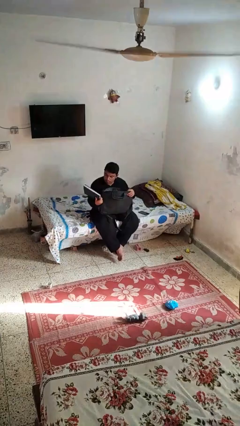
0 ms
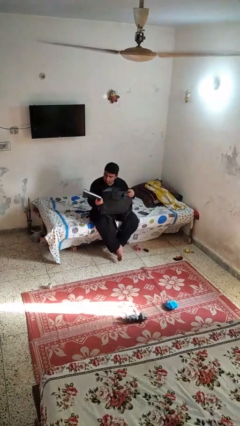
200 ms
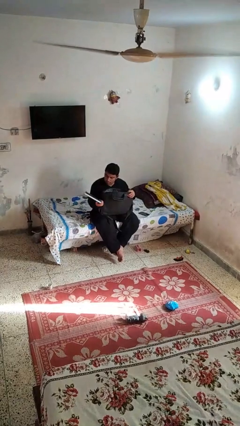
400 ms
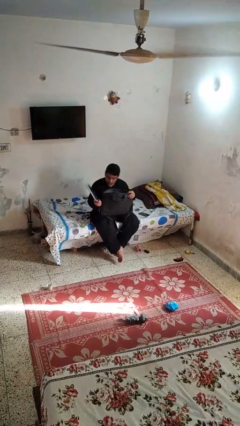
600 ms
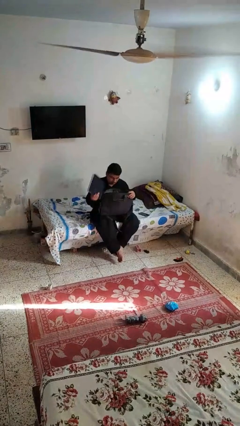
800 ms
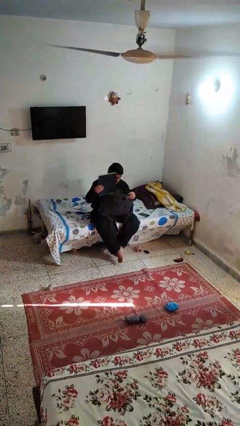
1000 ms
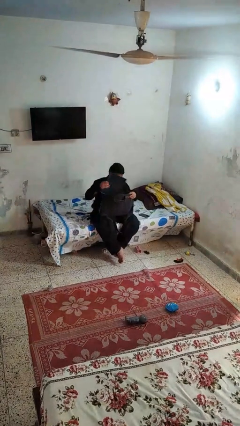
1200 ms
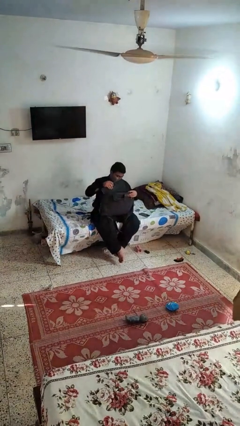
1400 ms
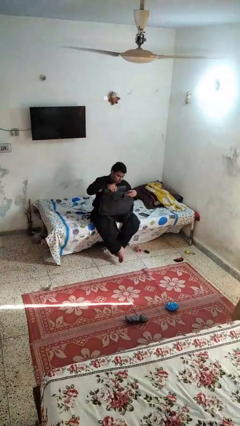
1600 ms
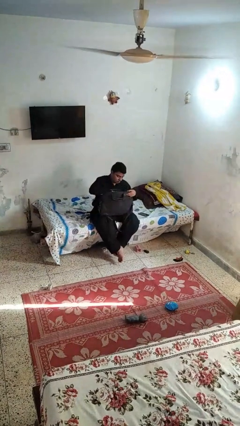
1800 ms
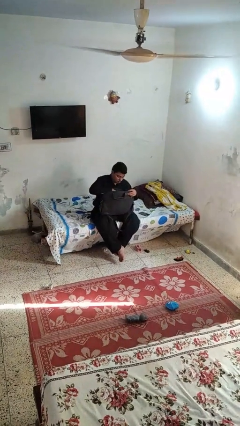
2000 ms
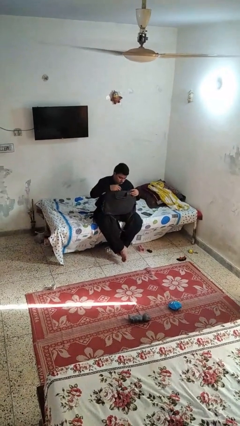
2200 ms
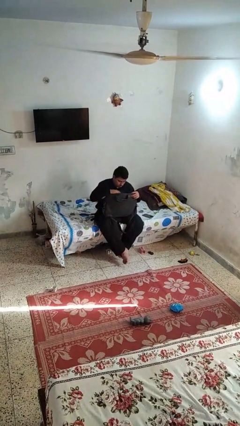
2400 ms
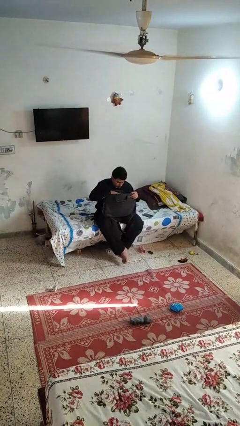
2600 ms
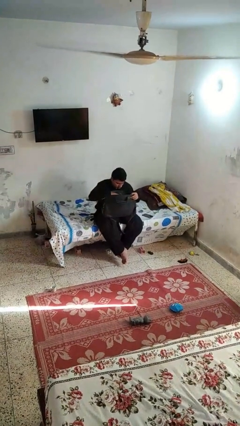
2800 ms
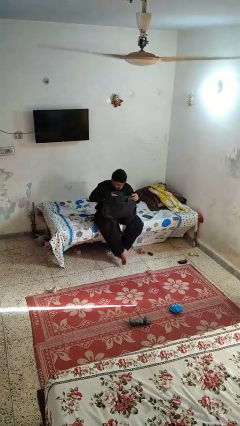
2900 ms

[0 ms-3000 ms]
person puts object into backpack

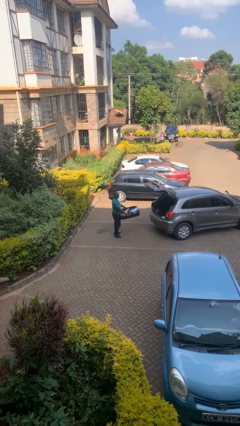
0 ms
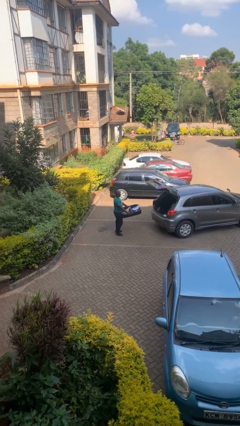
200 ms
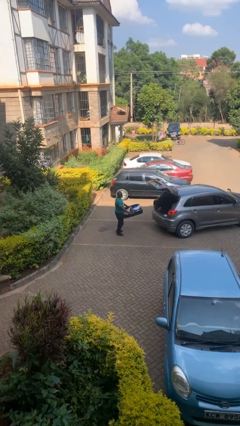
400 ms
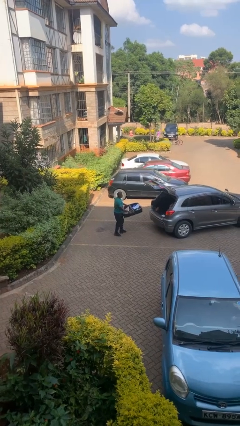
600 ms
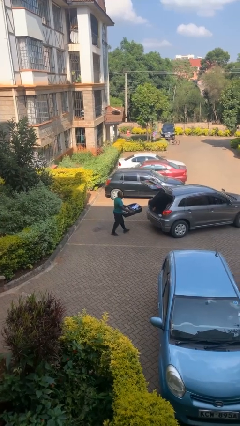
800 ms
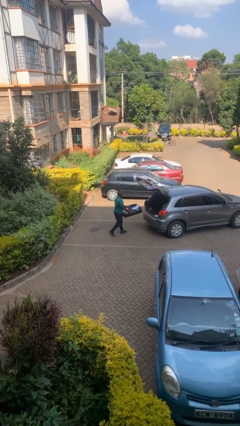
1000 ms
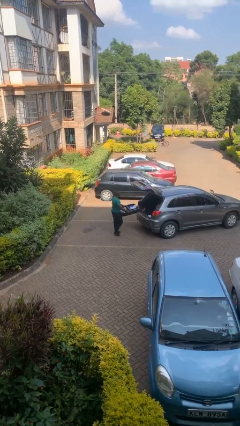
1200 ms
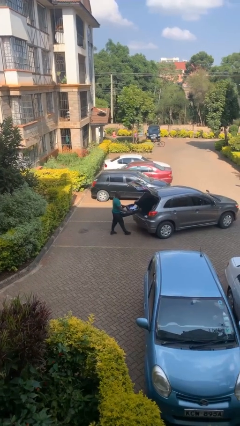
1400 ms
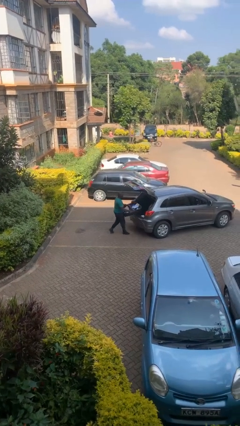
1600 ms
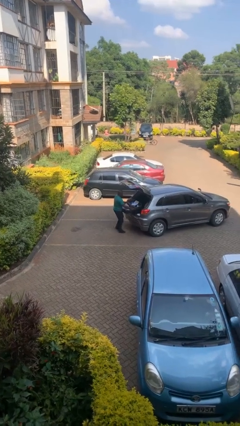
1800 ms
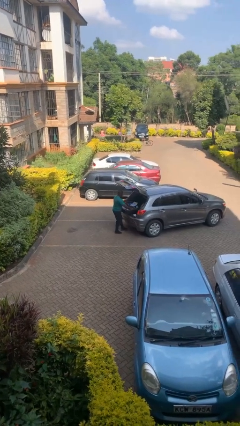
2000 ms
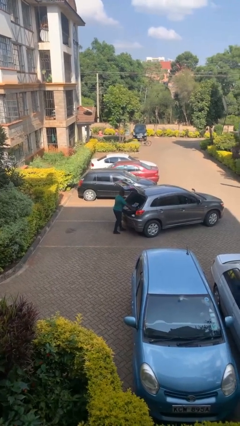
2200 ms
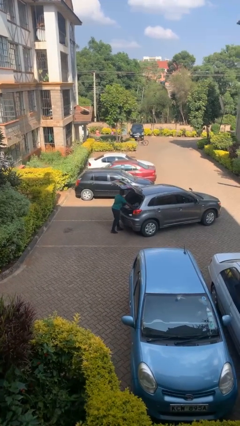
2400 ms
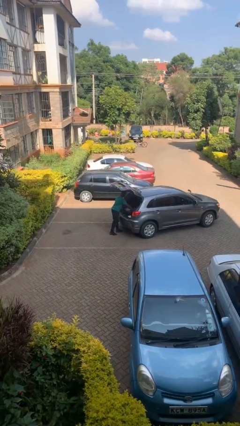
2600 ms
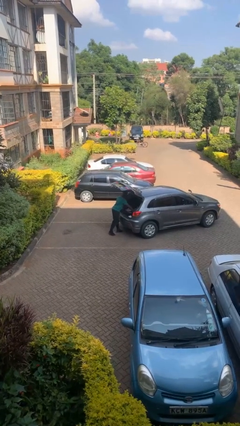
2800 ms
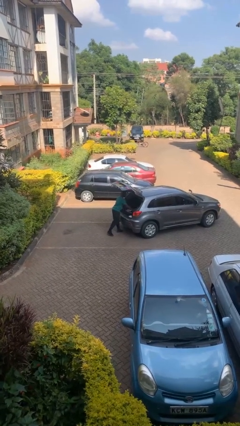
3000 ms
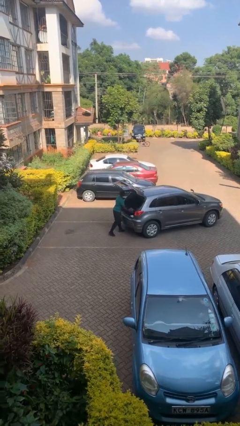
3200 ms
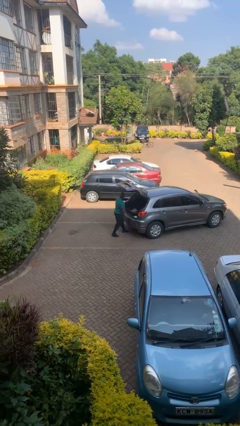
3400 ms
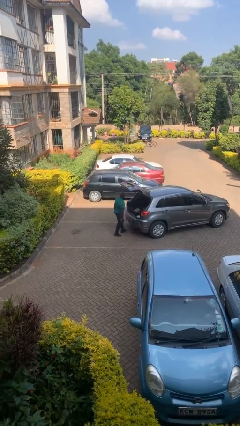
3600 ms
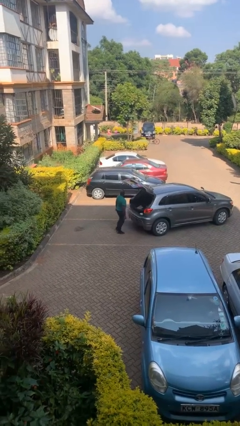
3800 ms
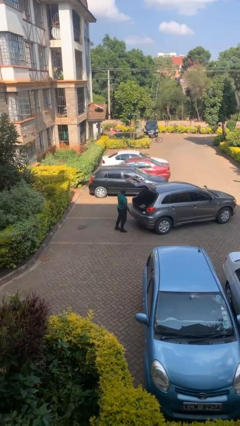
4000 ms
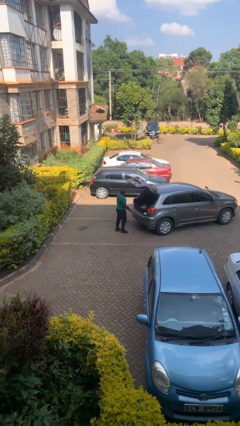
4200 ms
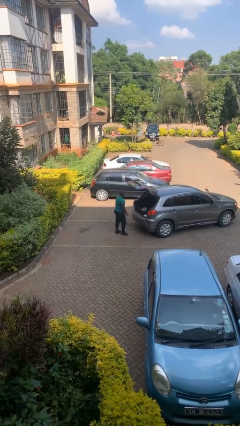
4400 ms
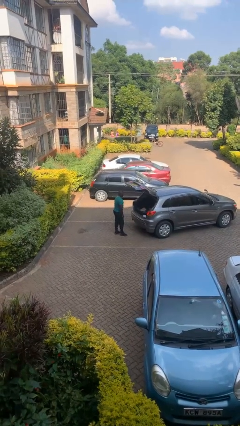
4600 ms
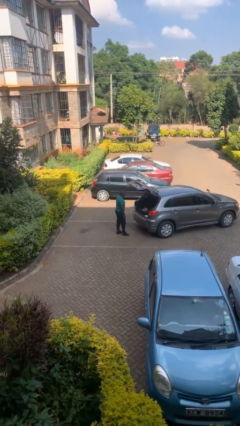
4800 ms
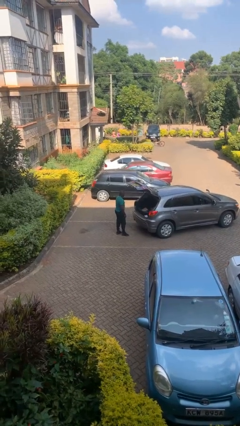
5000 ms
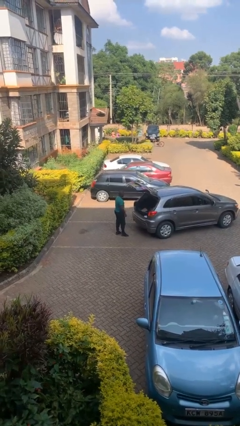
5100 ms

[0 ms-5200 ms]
person loads car

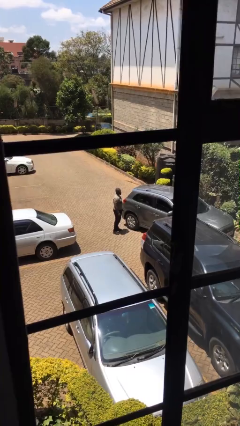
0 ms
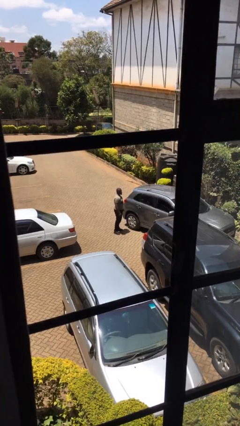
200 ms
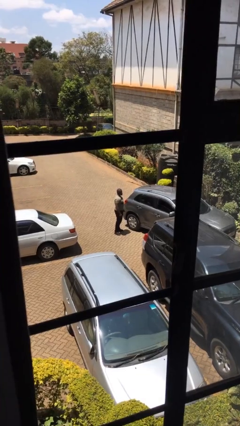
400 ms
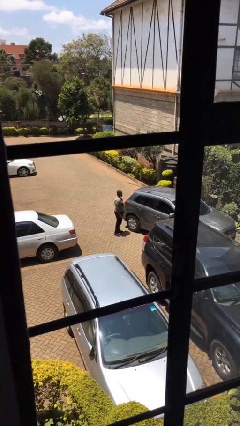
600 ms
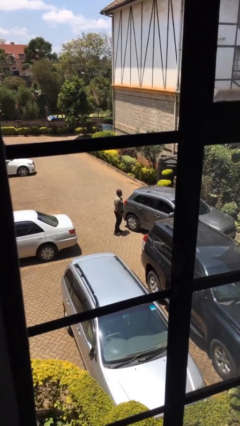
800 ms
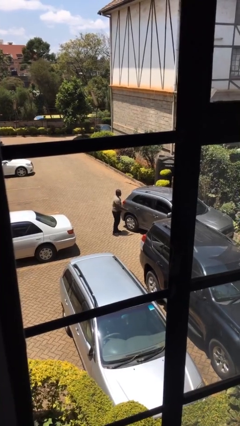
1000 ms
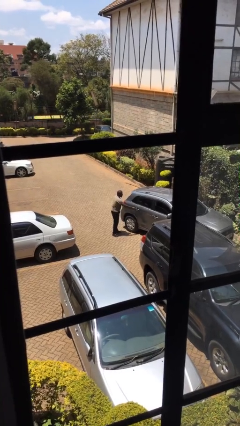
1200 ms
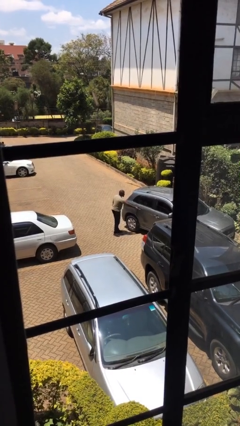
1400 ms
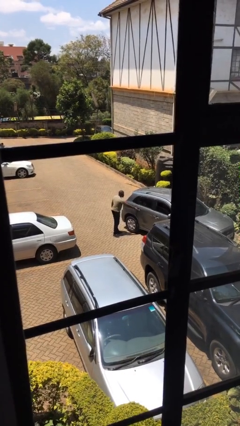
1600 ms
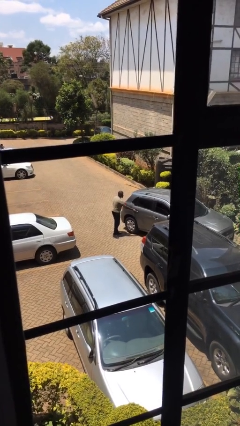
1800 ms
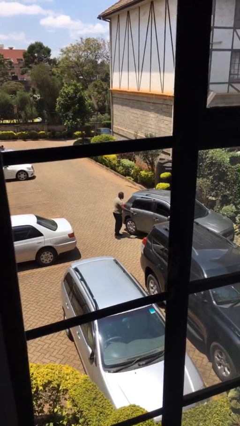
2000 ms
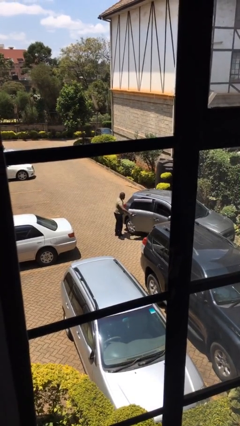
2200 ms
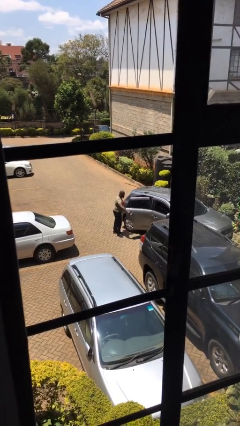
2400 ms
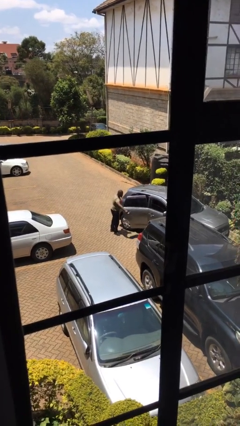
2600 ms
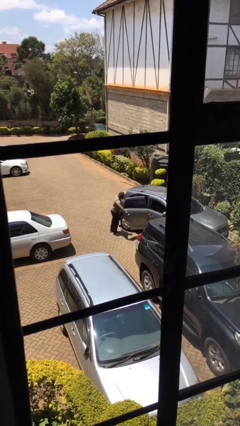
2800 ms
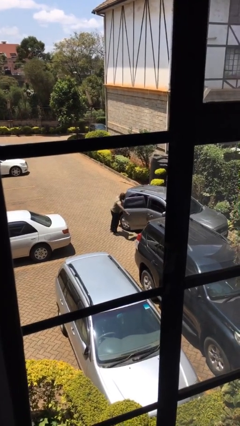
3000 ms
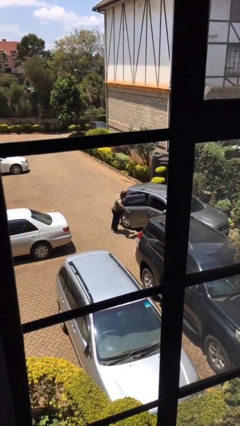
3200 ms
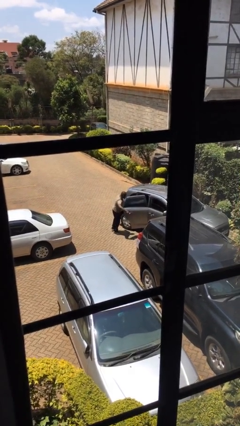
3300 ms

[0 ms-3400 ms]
person opens car door

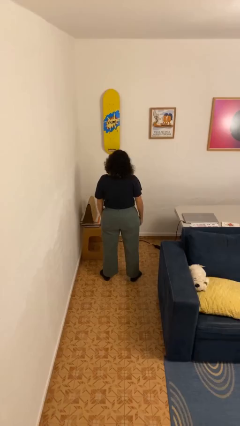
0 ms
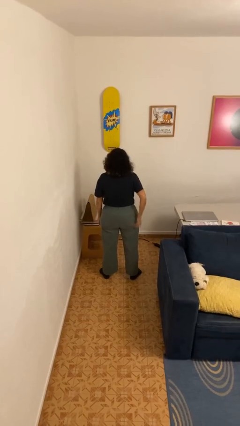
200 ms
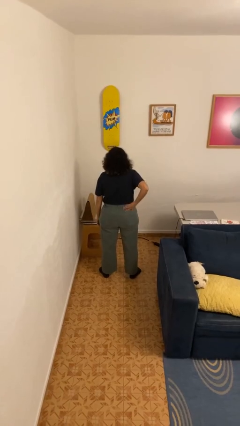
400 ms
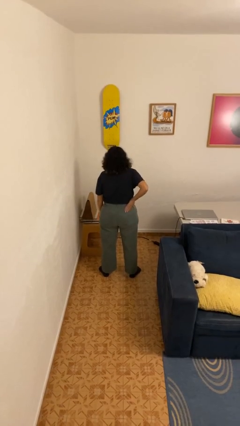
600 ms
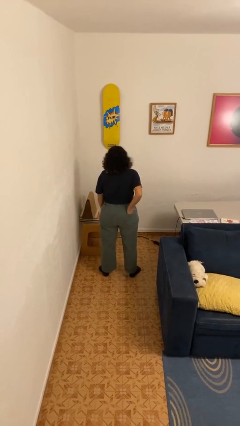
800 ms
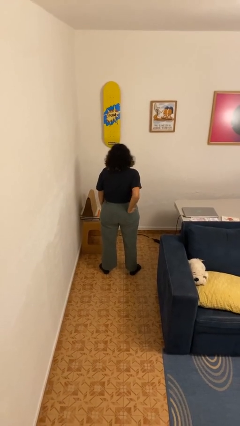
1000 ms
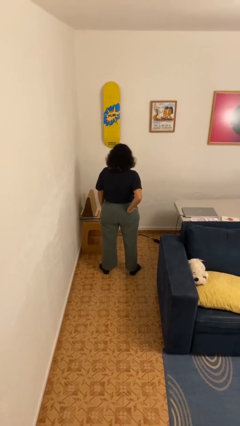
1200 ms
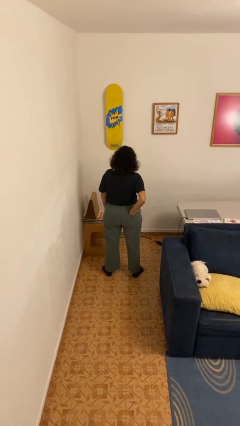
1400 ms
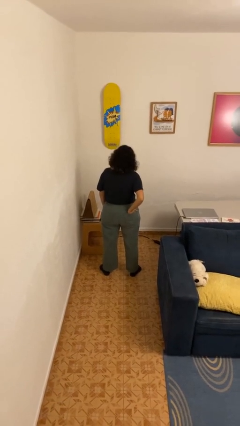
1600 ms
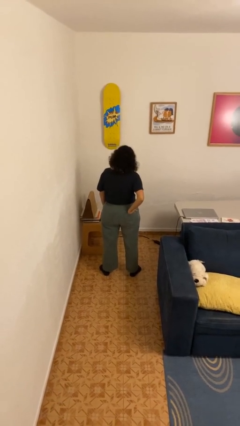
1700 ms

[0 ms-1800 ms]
person puts hands in back pockets

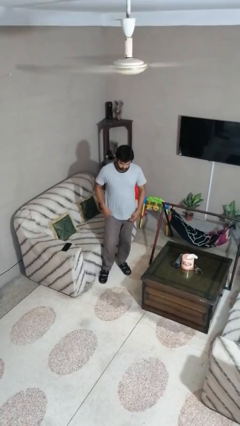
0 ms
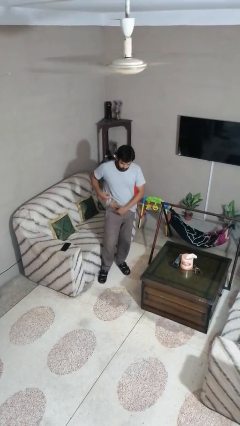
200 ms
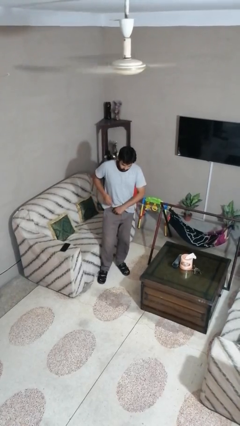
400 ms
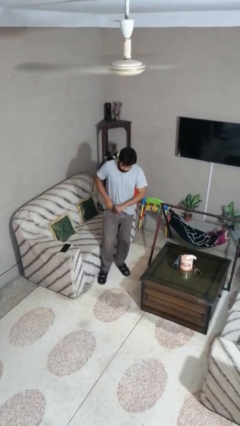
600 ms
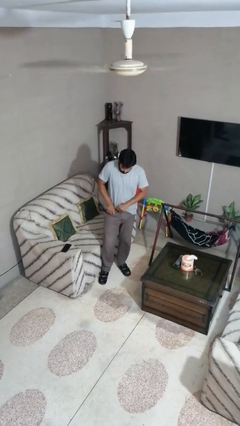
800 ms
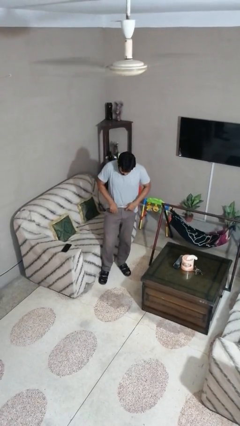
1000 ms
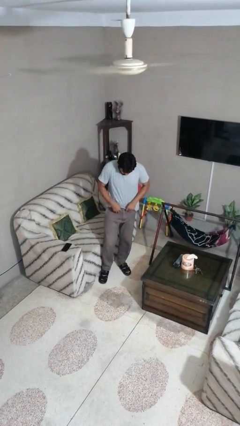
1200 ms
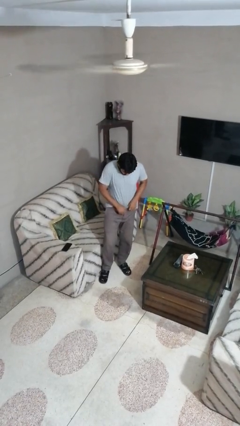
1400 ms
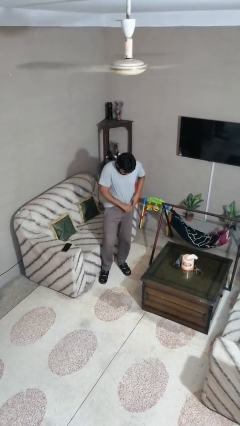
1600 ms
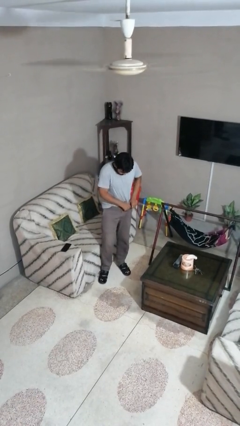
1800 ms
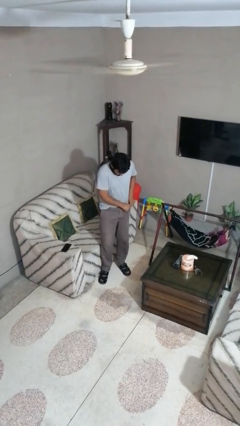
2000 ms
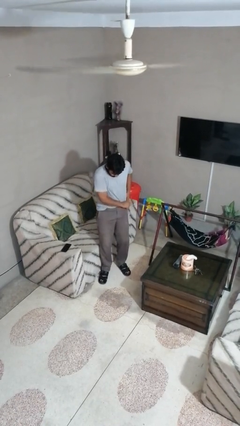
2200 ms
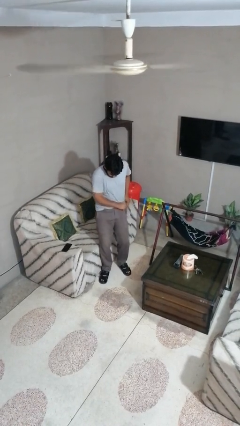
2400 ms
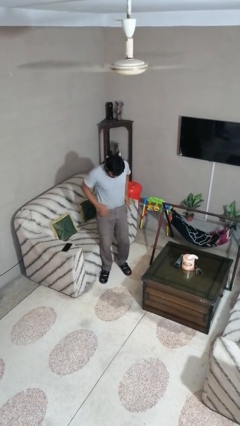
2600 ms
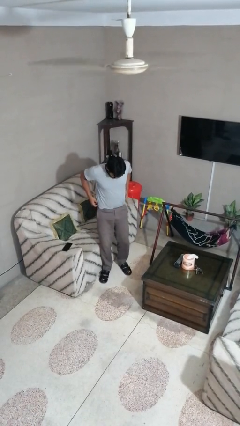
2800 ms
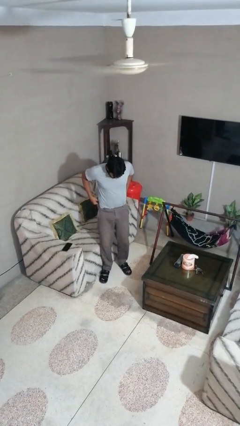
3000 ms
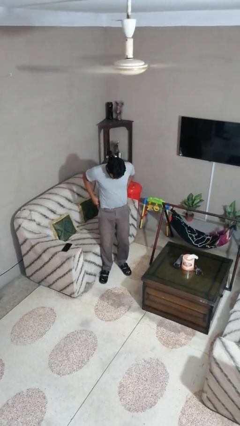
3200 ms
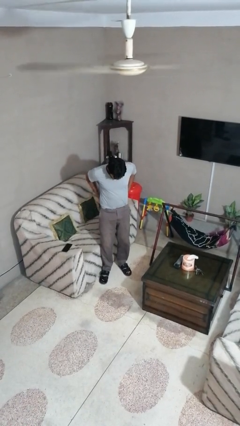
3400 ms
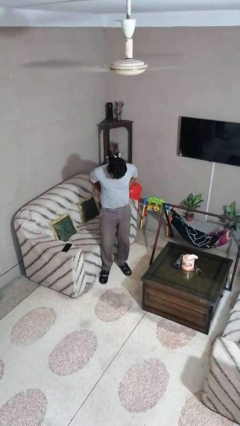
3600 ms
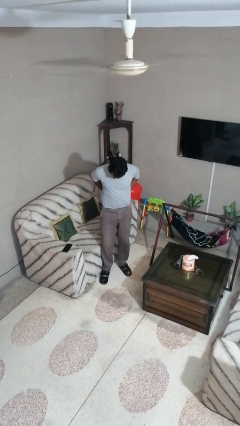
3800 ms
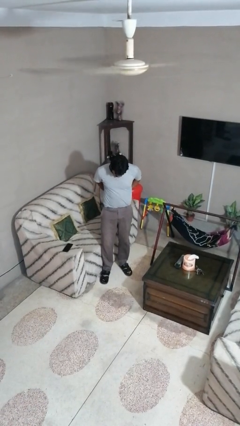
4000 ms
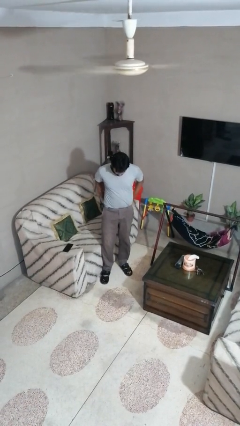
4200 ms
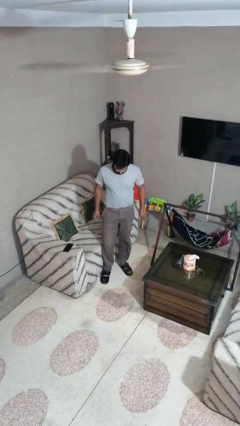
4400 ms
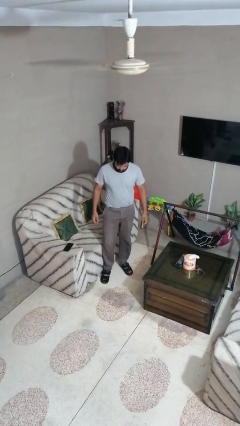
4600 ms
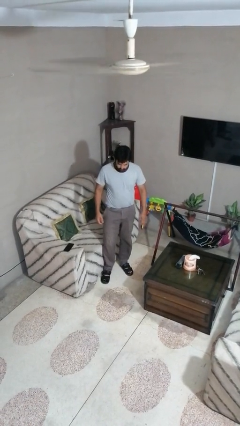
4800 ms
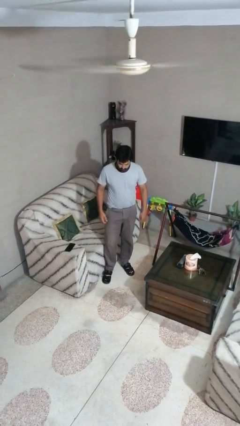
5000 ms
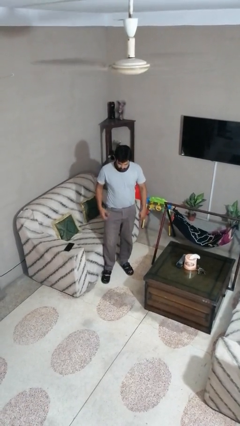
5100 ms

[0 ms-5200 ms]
person tucks in shirt
